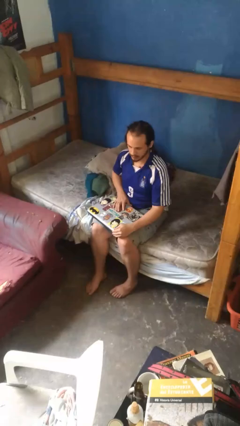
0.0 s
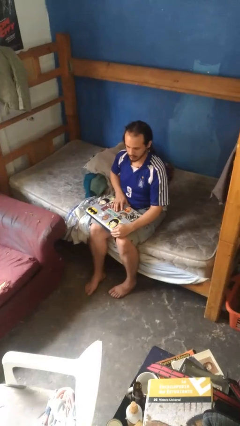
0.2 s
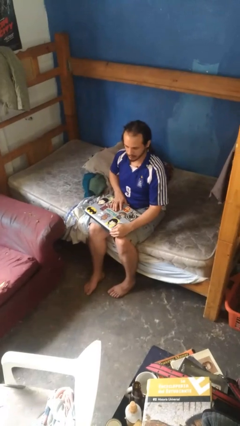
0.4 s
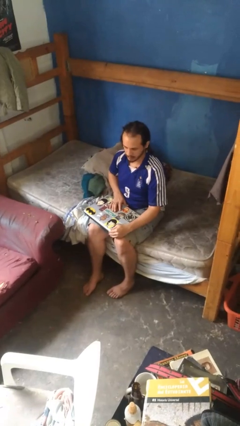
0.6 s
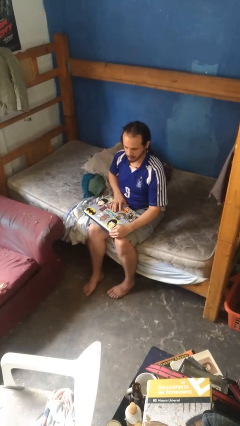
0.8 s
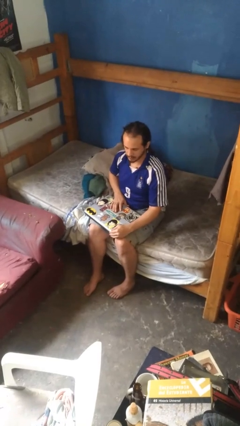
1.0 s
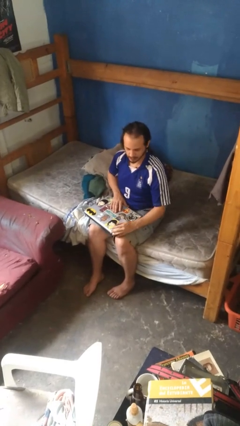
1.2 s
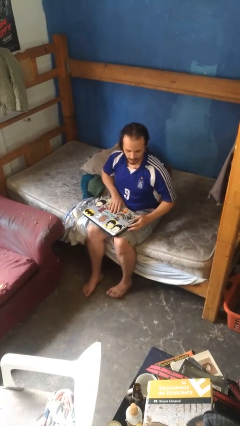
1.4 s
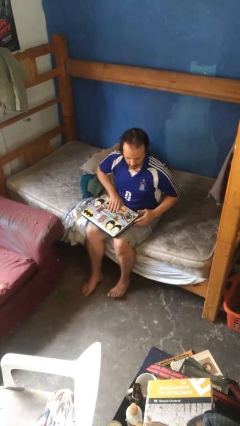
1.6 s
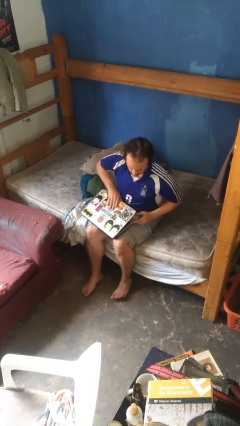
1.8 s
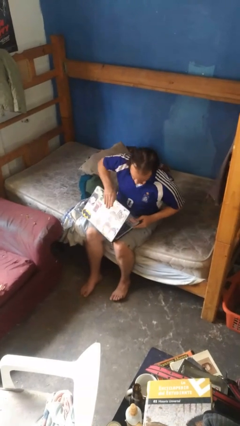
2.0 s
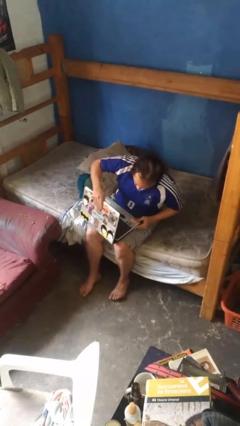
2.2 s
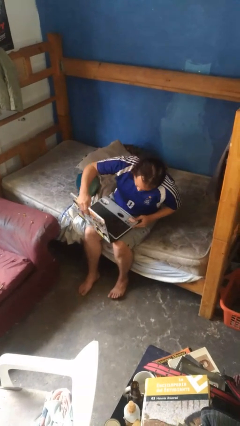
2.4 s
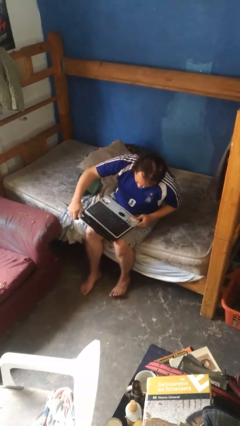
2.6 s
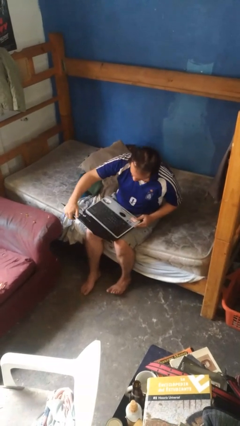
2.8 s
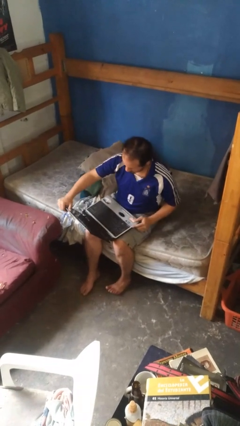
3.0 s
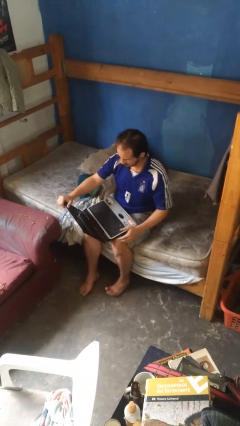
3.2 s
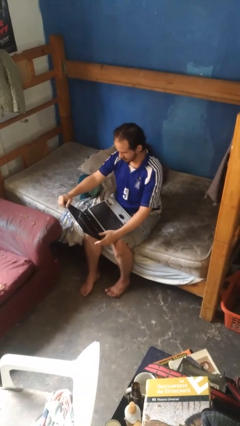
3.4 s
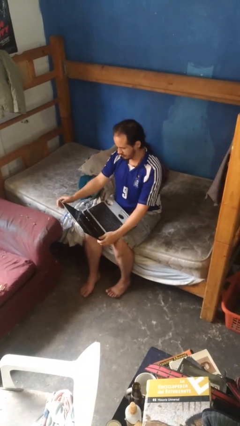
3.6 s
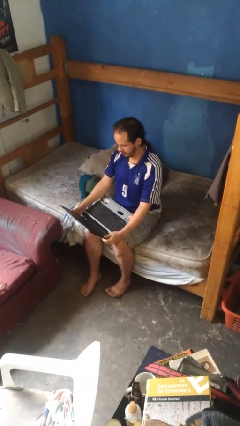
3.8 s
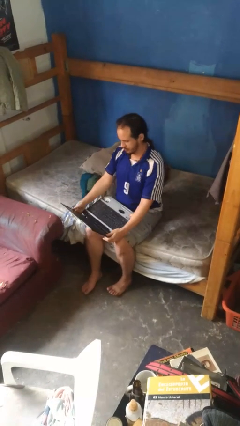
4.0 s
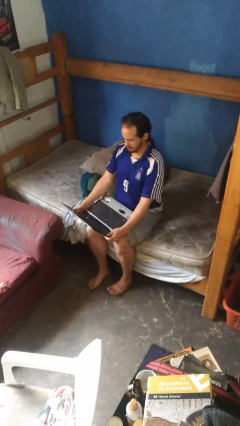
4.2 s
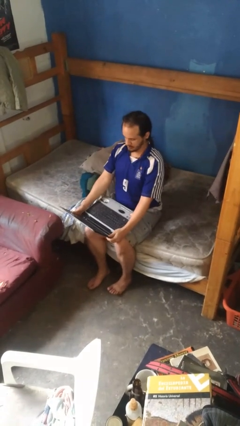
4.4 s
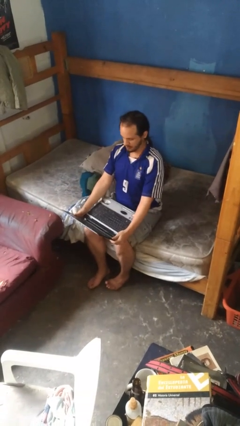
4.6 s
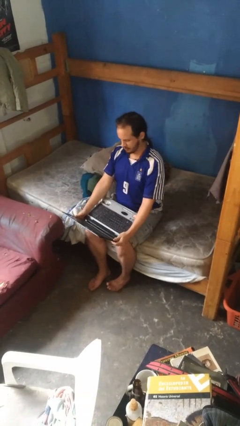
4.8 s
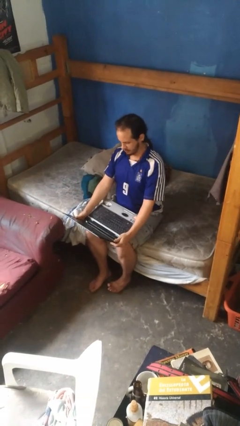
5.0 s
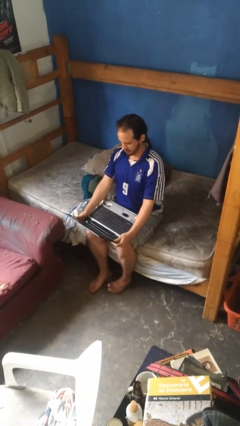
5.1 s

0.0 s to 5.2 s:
person opens laptop

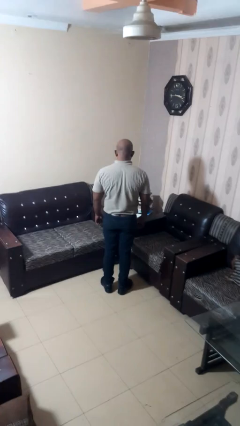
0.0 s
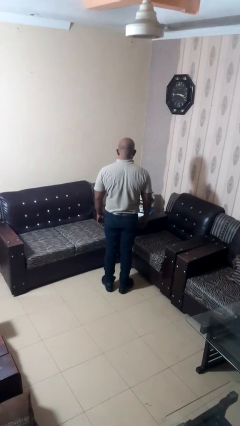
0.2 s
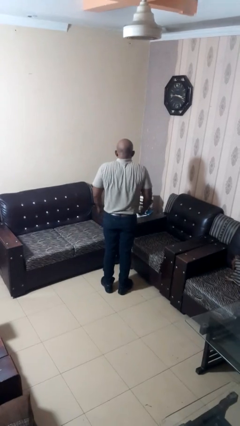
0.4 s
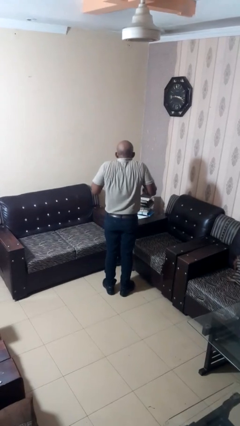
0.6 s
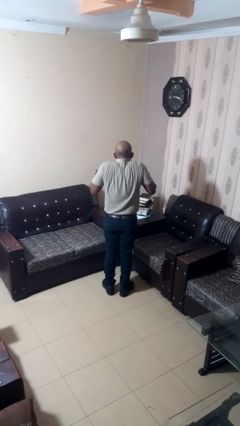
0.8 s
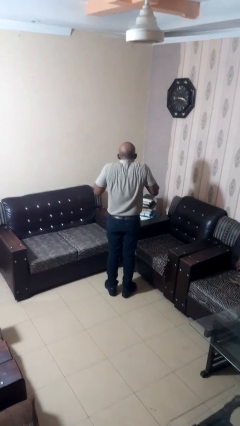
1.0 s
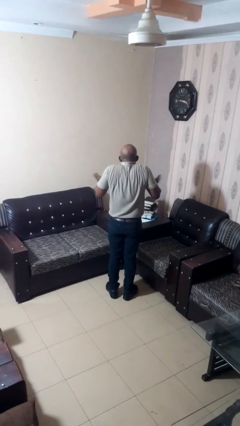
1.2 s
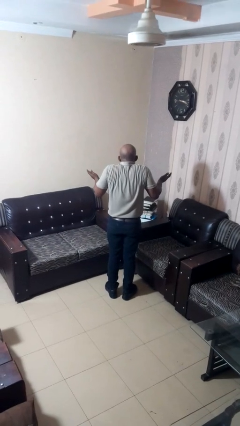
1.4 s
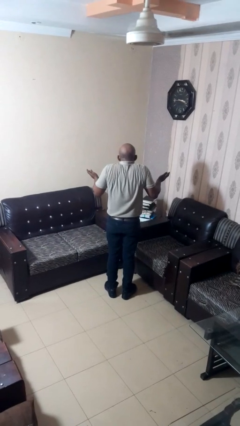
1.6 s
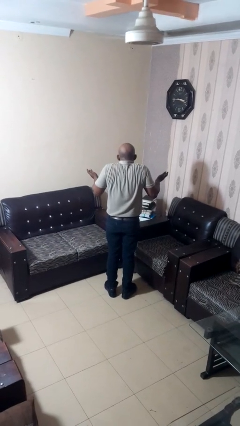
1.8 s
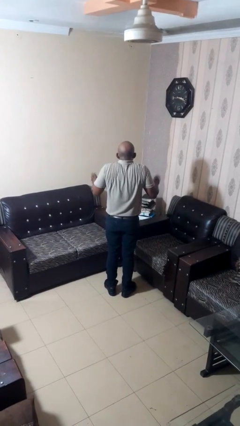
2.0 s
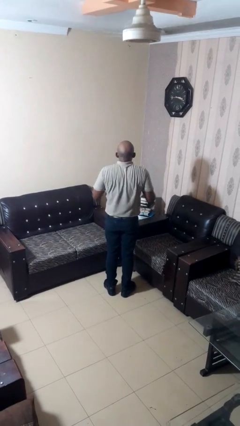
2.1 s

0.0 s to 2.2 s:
person shrugs

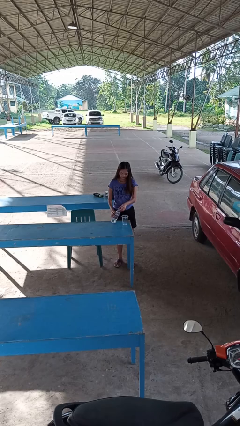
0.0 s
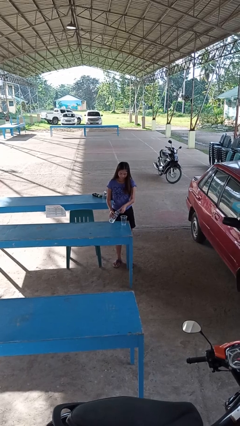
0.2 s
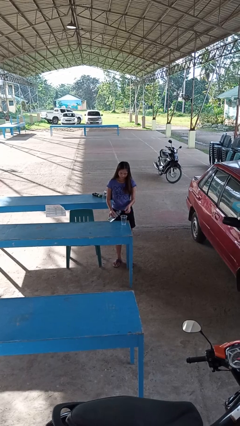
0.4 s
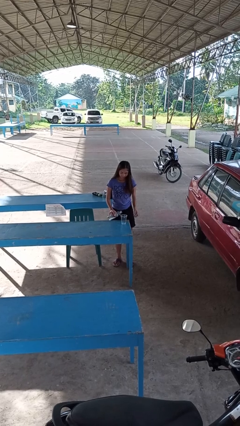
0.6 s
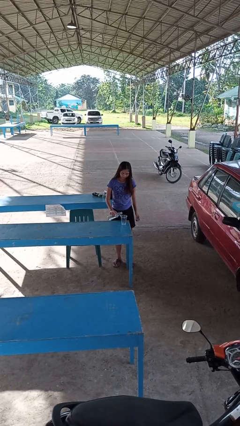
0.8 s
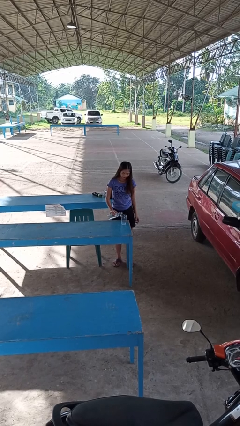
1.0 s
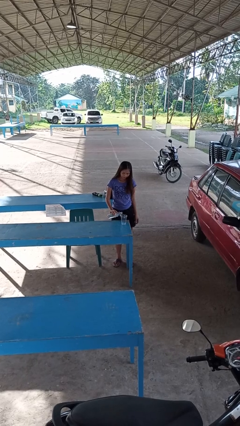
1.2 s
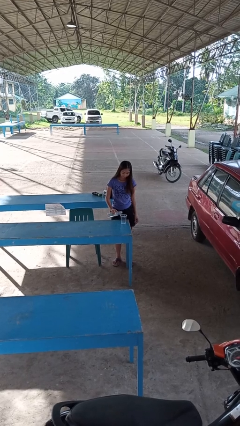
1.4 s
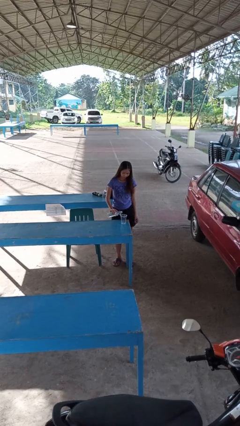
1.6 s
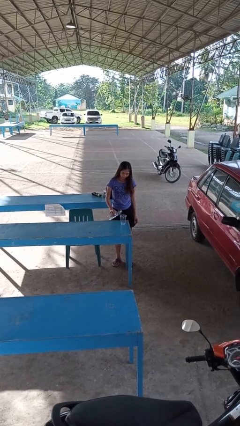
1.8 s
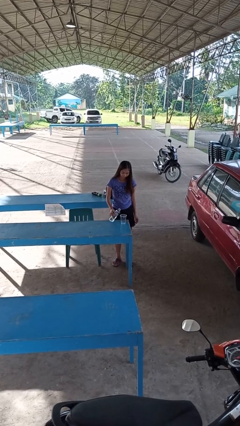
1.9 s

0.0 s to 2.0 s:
person pours liquid into cup

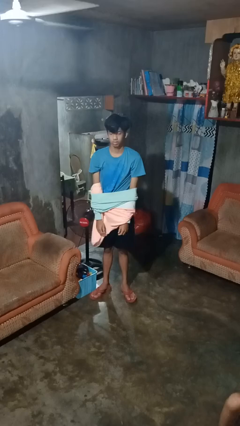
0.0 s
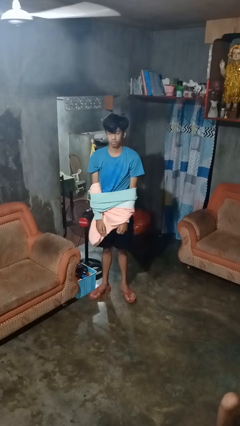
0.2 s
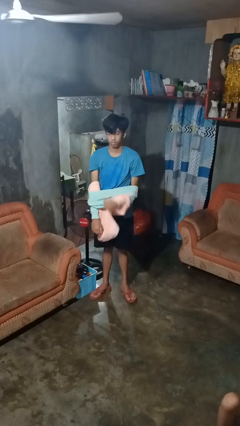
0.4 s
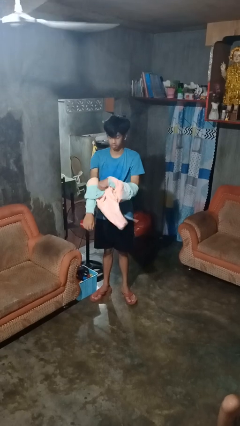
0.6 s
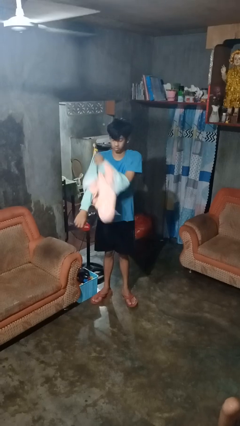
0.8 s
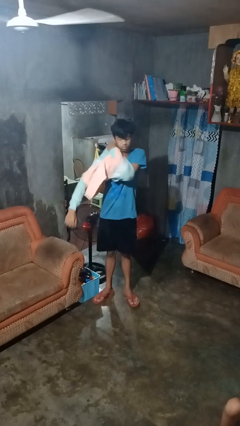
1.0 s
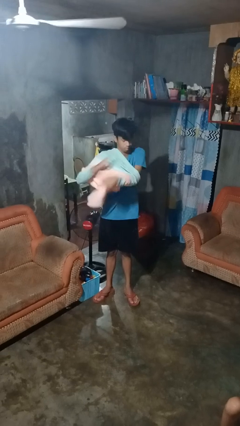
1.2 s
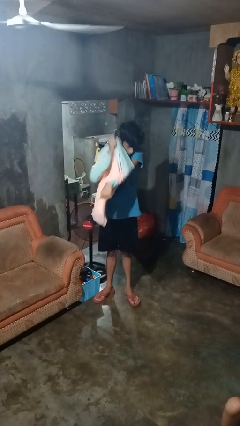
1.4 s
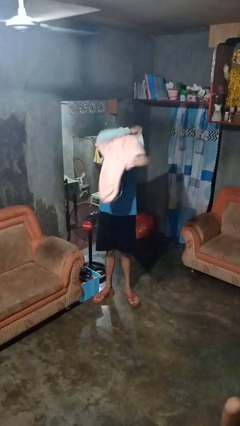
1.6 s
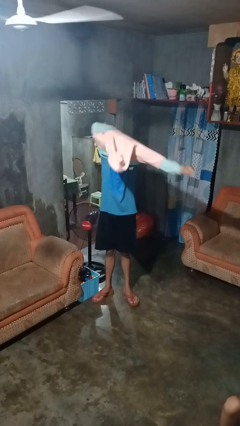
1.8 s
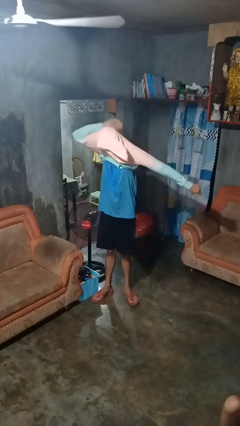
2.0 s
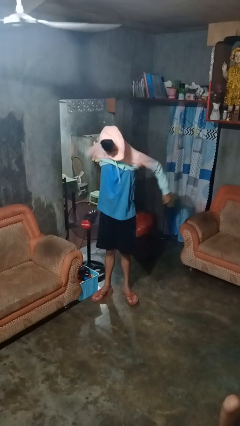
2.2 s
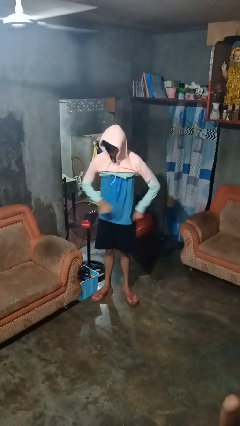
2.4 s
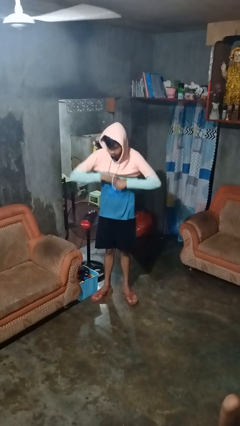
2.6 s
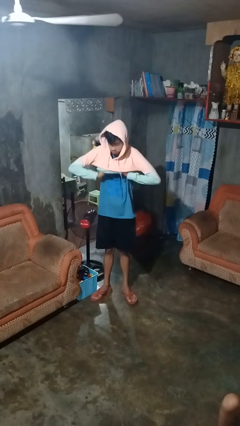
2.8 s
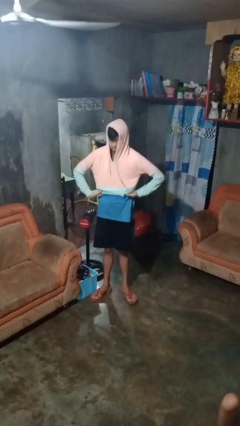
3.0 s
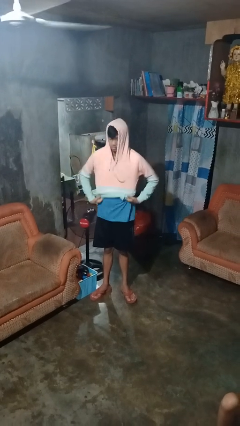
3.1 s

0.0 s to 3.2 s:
person puts on hoodie

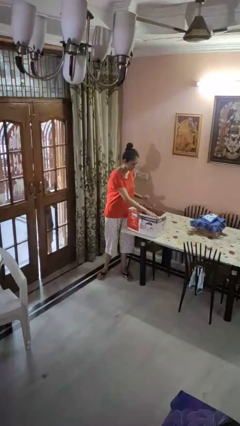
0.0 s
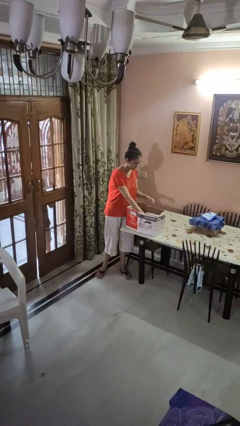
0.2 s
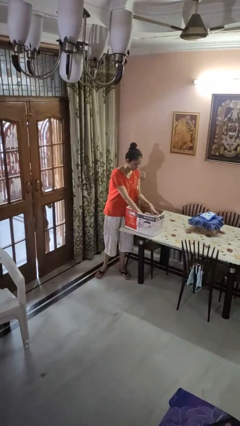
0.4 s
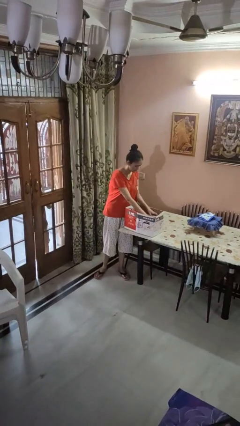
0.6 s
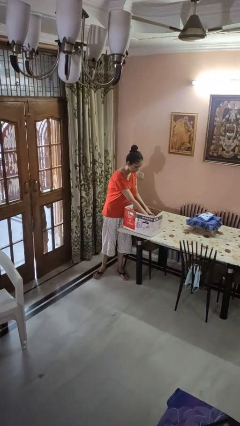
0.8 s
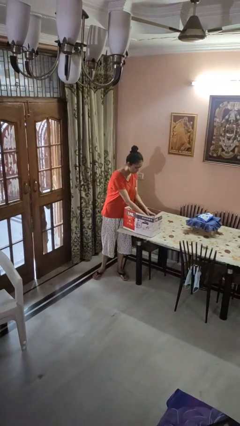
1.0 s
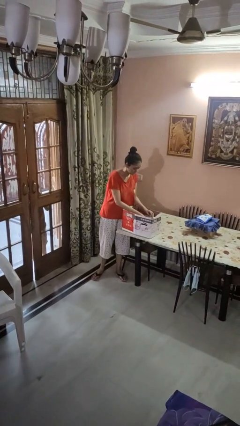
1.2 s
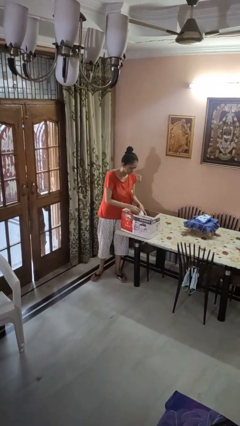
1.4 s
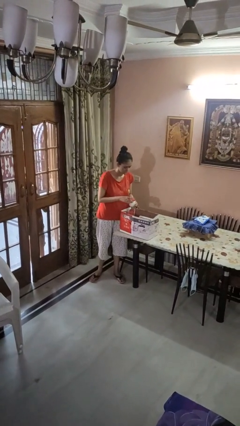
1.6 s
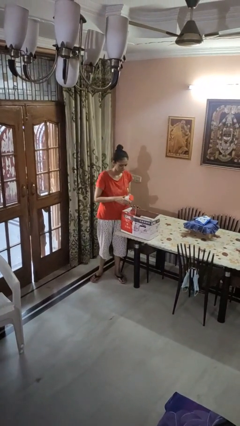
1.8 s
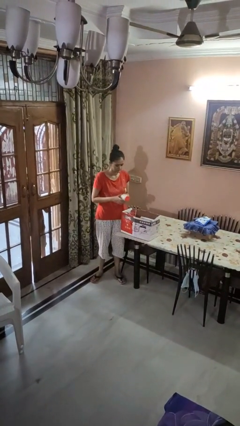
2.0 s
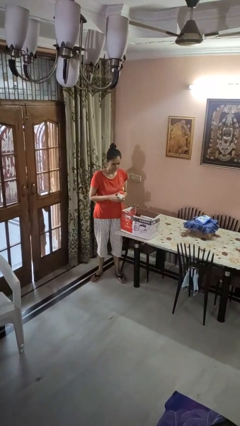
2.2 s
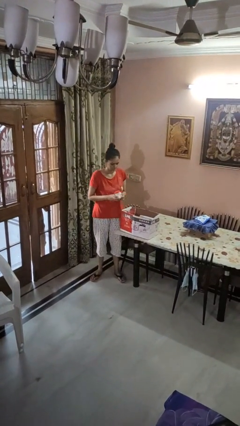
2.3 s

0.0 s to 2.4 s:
person takes object from box

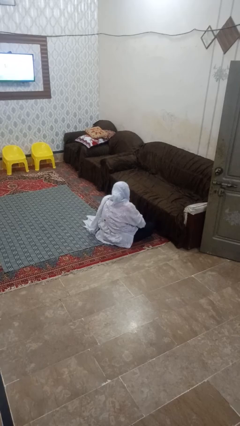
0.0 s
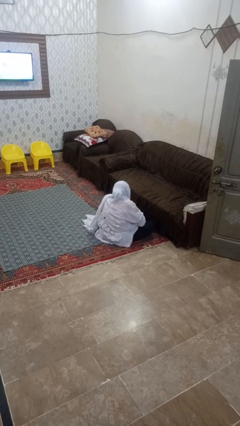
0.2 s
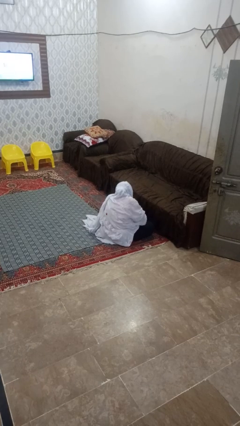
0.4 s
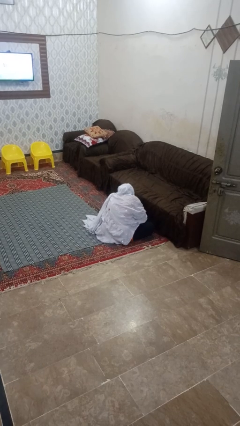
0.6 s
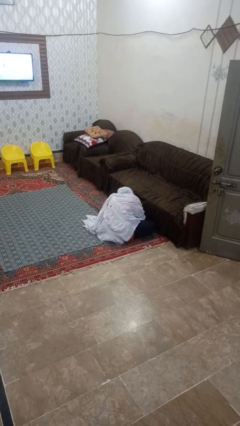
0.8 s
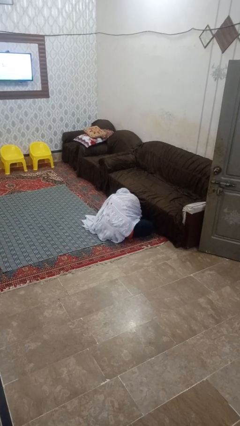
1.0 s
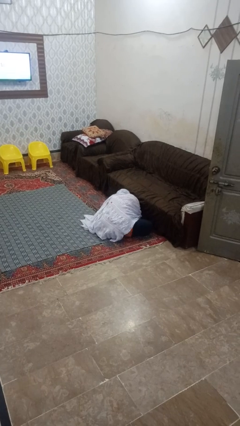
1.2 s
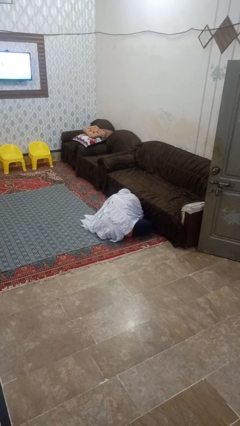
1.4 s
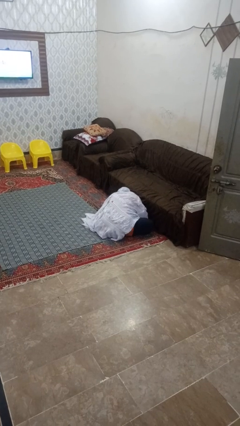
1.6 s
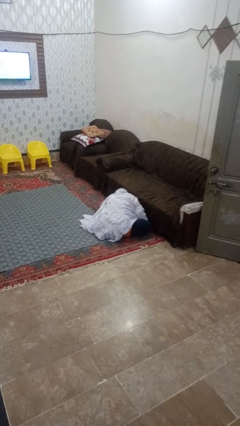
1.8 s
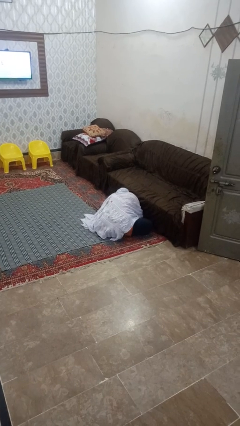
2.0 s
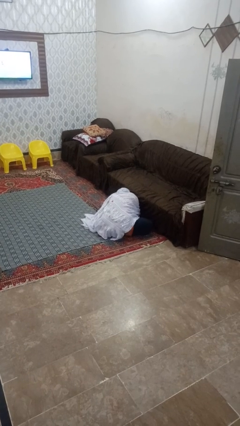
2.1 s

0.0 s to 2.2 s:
person searches under couch

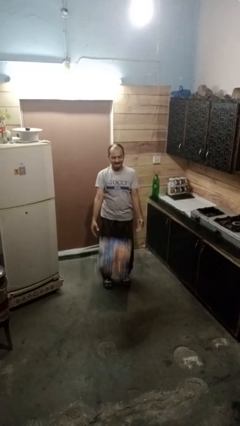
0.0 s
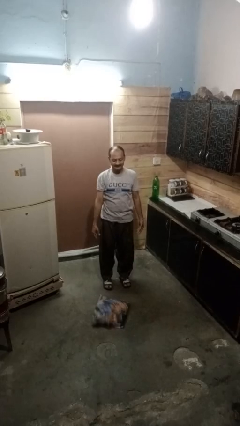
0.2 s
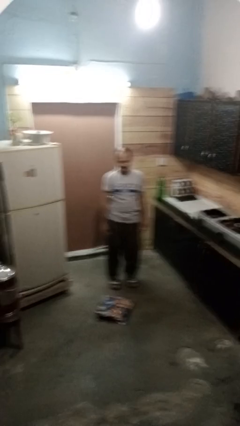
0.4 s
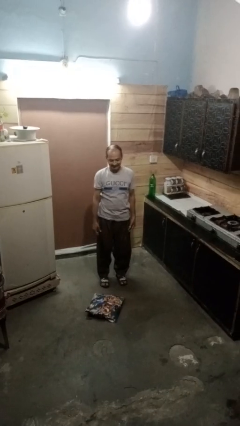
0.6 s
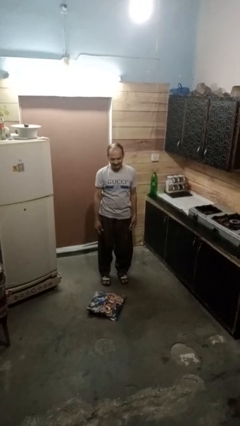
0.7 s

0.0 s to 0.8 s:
person catches dropped object
